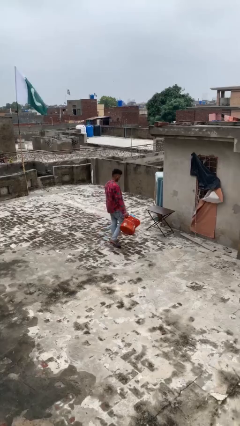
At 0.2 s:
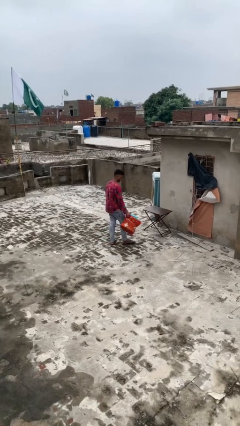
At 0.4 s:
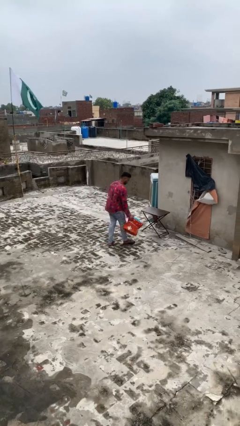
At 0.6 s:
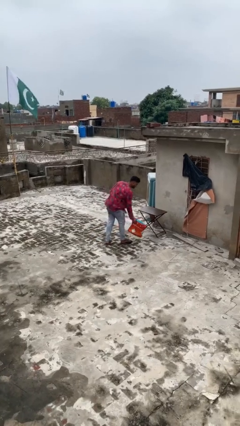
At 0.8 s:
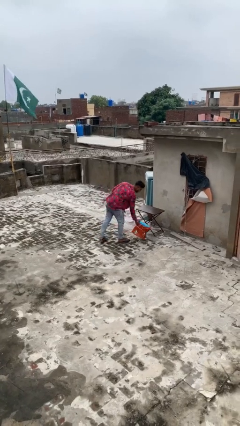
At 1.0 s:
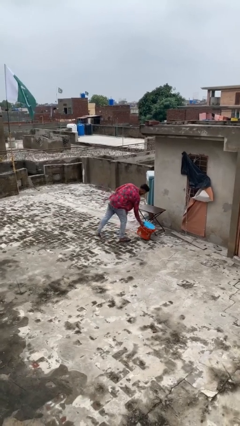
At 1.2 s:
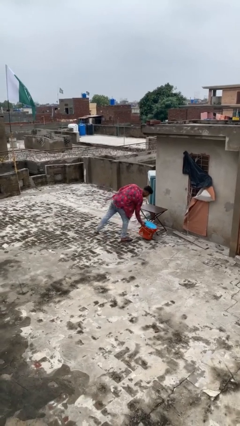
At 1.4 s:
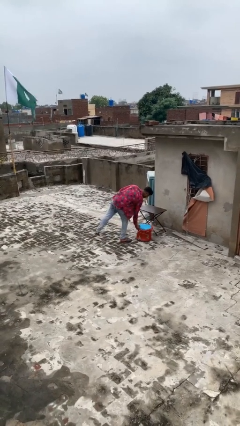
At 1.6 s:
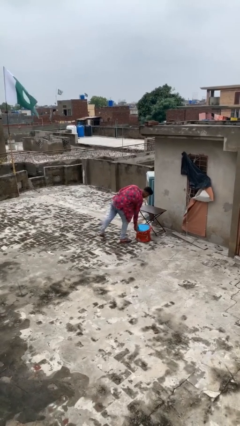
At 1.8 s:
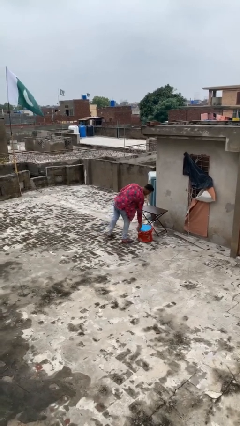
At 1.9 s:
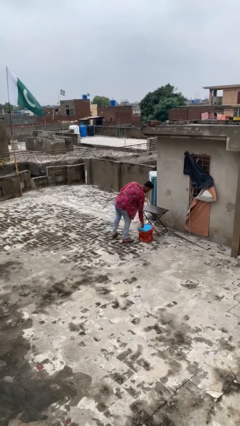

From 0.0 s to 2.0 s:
person puts down object on floor

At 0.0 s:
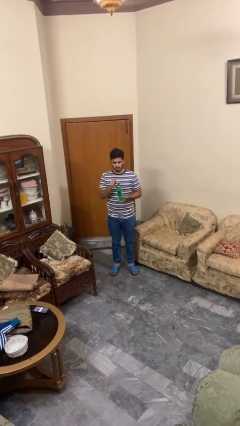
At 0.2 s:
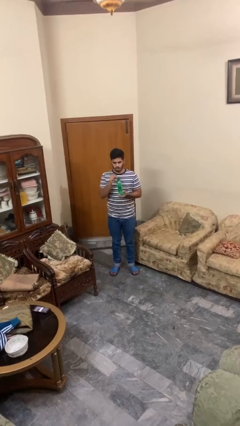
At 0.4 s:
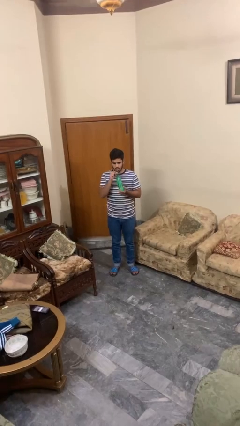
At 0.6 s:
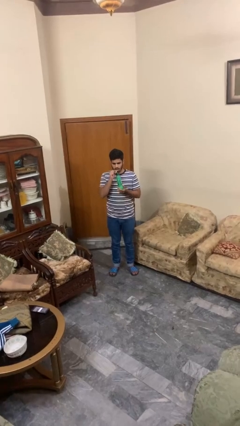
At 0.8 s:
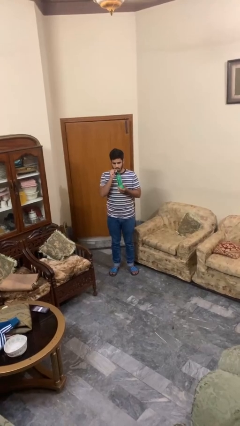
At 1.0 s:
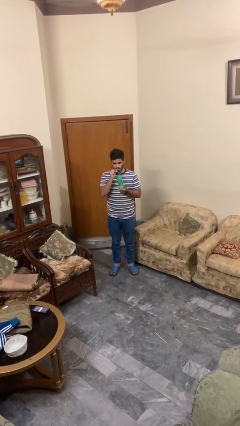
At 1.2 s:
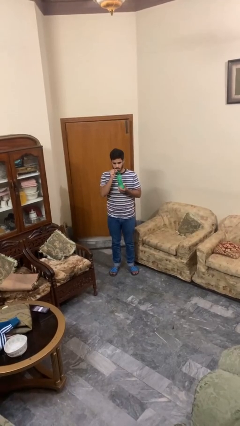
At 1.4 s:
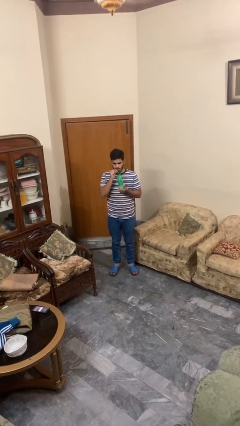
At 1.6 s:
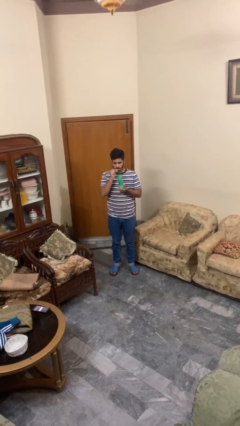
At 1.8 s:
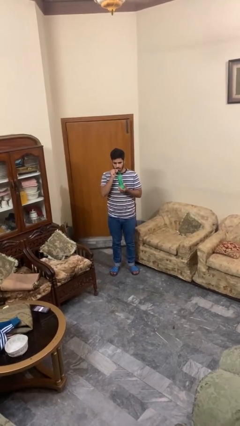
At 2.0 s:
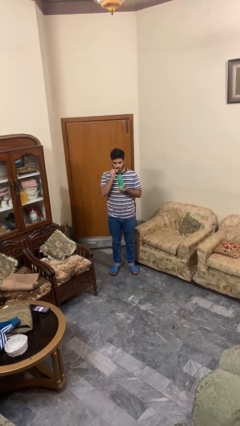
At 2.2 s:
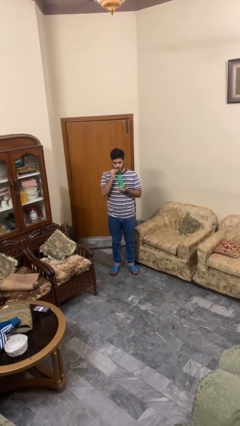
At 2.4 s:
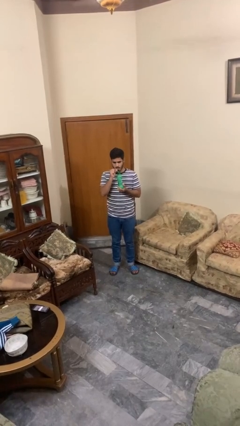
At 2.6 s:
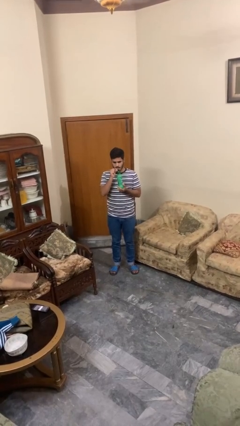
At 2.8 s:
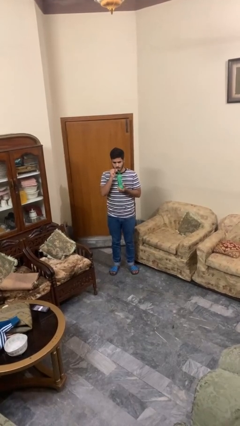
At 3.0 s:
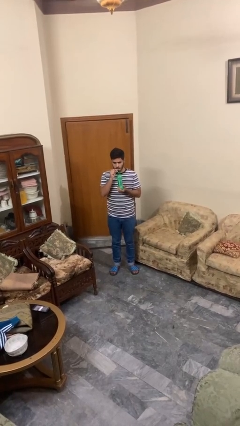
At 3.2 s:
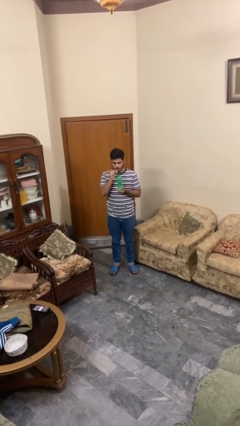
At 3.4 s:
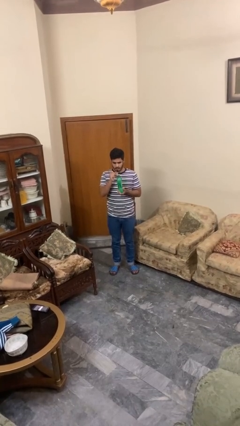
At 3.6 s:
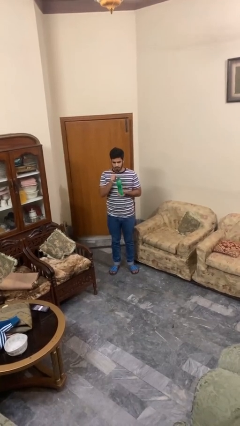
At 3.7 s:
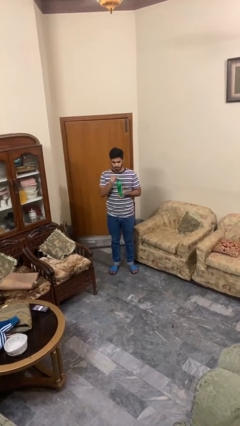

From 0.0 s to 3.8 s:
person drinks from straw

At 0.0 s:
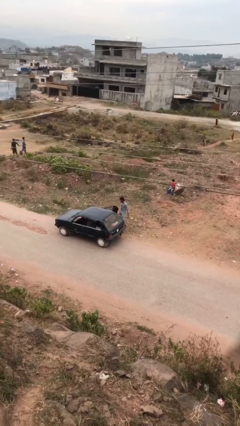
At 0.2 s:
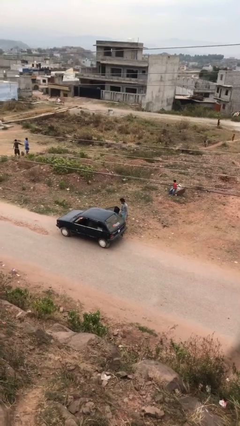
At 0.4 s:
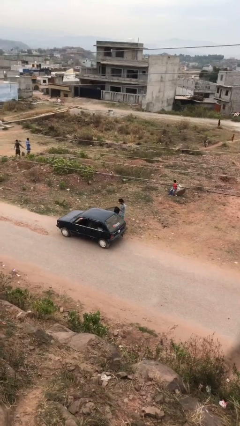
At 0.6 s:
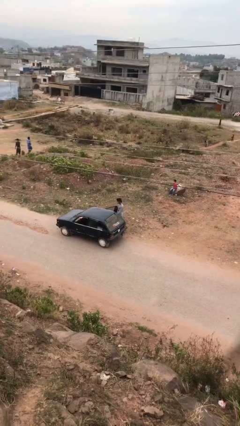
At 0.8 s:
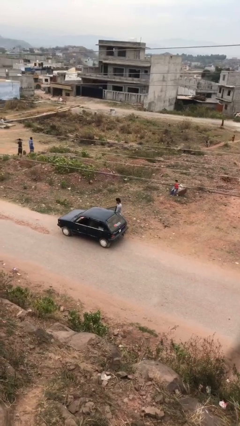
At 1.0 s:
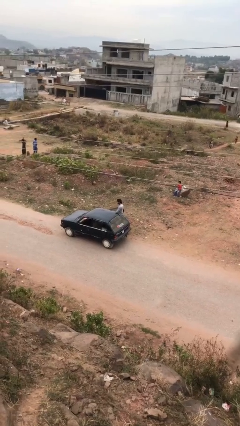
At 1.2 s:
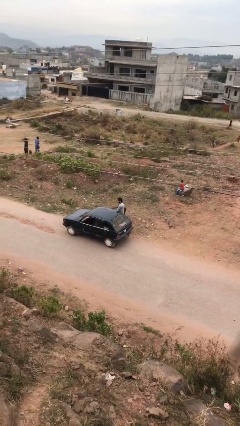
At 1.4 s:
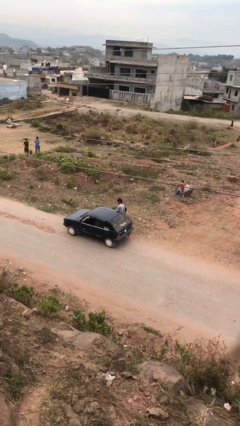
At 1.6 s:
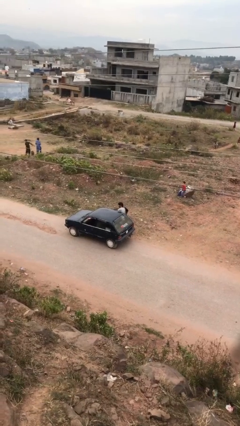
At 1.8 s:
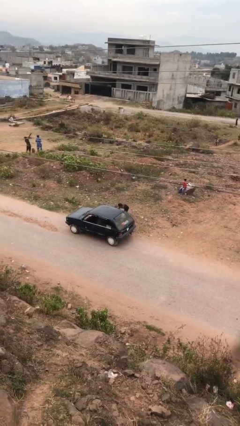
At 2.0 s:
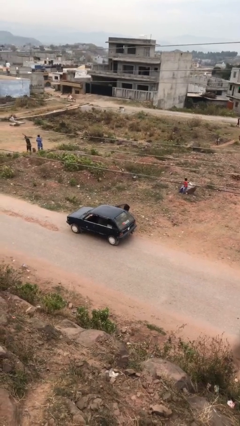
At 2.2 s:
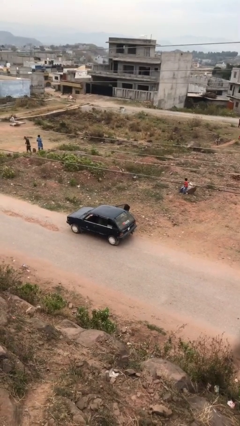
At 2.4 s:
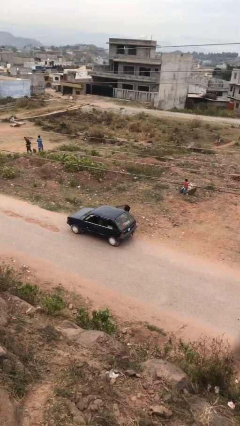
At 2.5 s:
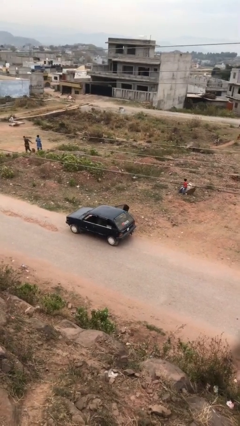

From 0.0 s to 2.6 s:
person enters car

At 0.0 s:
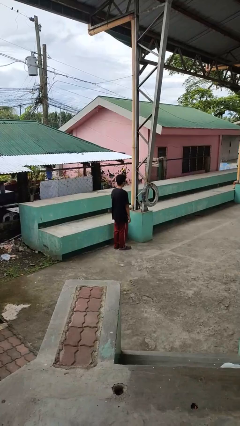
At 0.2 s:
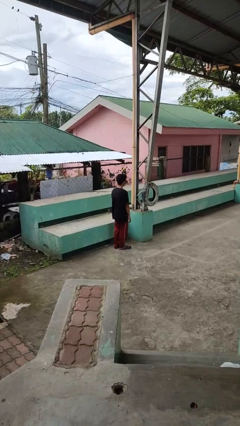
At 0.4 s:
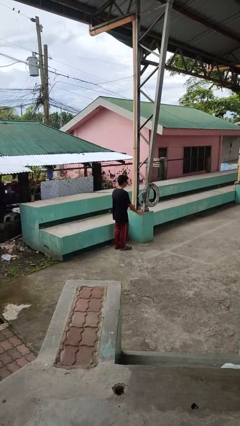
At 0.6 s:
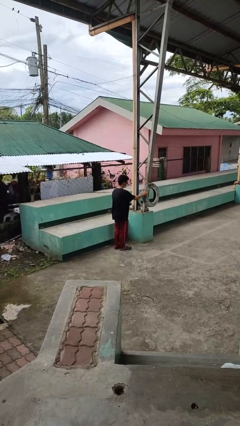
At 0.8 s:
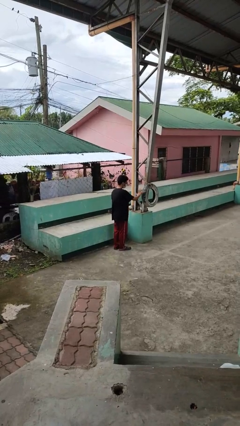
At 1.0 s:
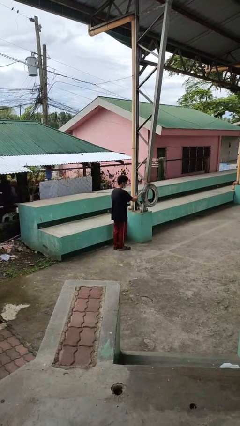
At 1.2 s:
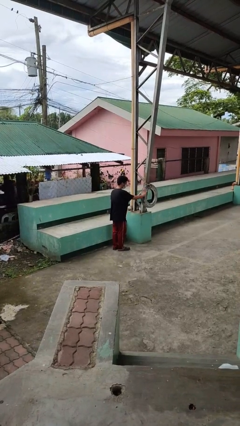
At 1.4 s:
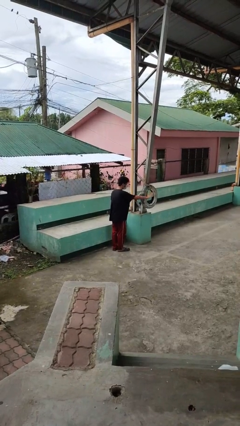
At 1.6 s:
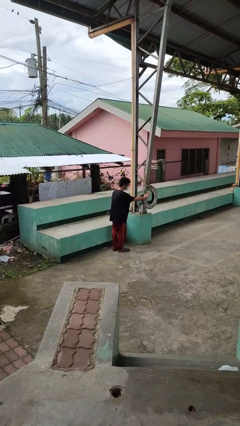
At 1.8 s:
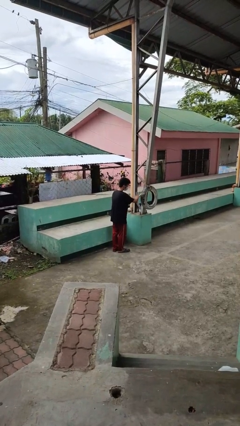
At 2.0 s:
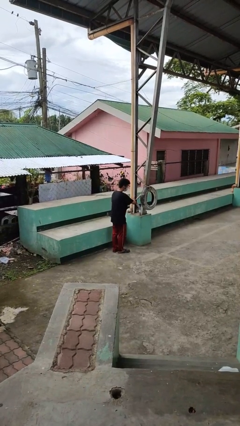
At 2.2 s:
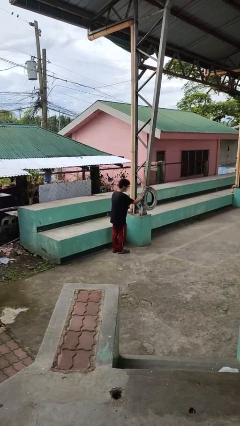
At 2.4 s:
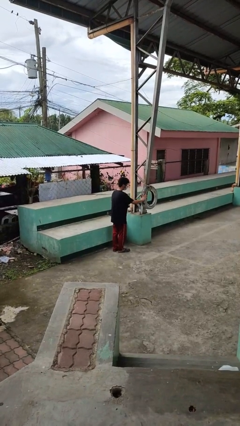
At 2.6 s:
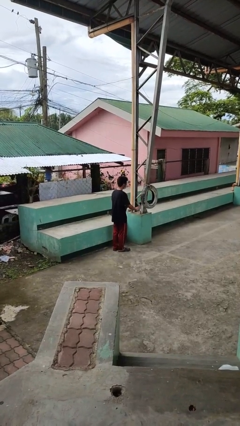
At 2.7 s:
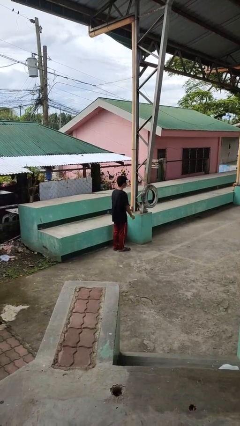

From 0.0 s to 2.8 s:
person waves hand over object

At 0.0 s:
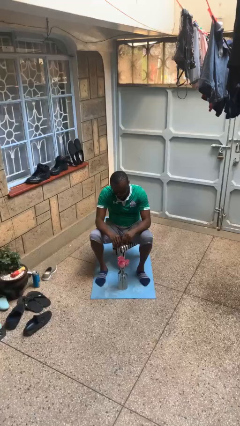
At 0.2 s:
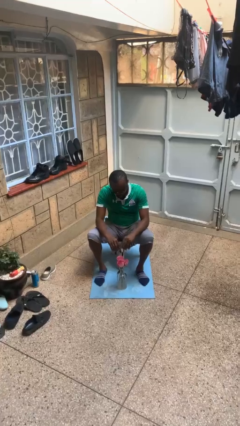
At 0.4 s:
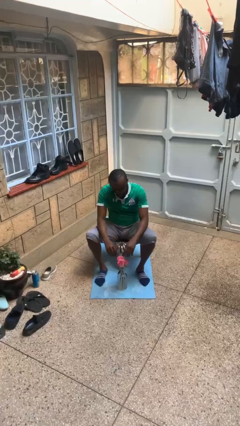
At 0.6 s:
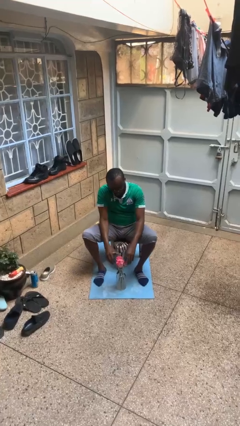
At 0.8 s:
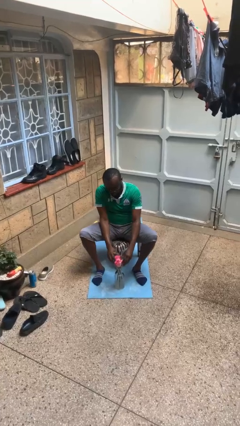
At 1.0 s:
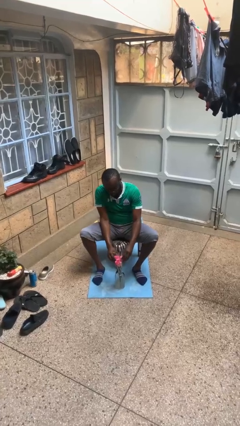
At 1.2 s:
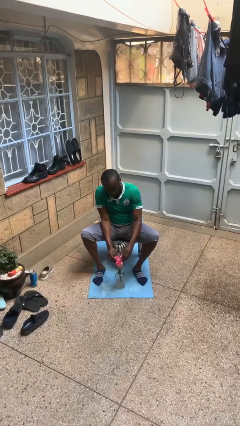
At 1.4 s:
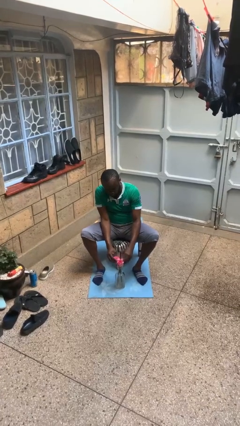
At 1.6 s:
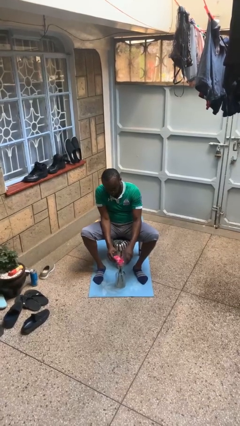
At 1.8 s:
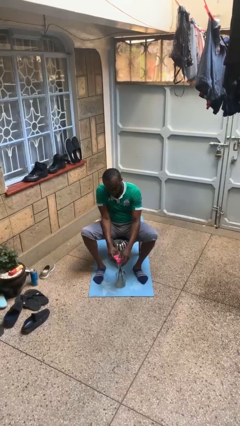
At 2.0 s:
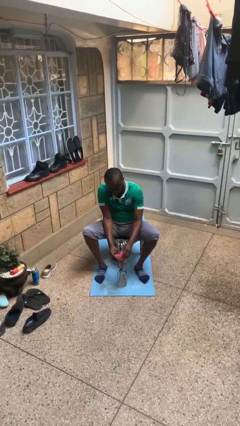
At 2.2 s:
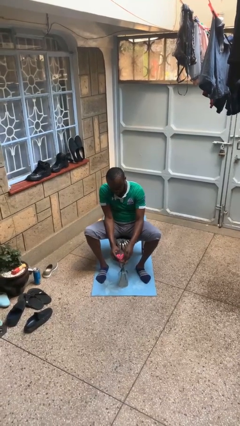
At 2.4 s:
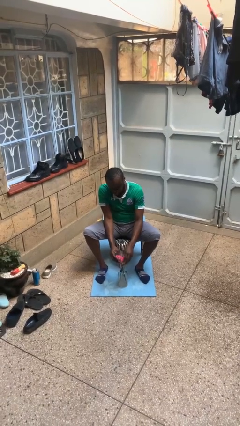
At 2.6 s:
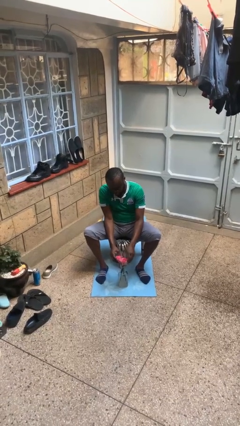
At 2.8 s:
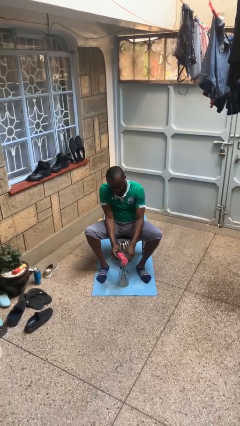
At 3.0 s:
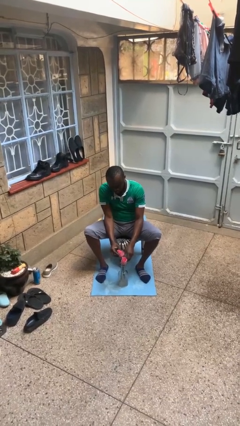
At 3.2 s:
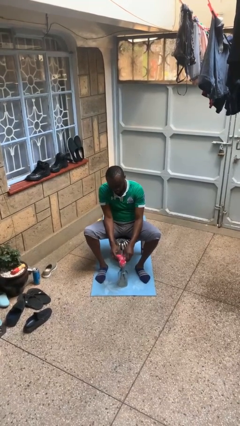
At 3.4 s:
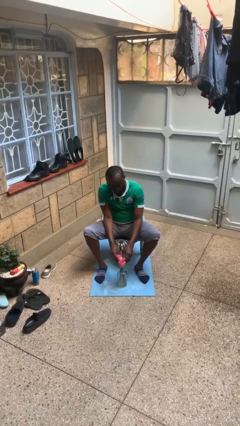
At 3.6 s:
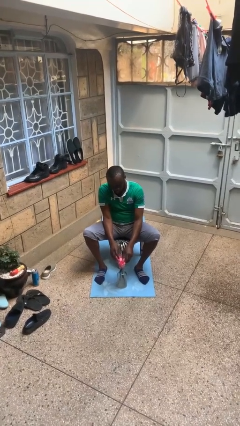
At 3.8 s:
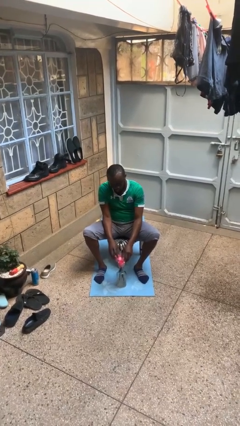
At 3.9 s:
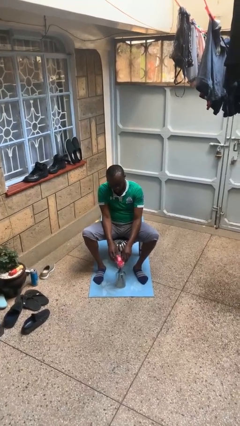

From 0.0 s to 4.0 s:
person arranges flowers in vase

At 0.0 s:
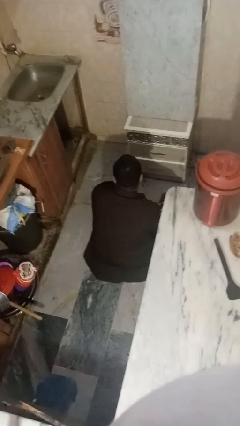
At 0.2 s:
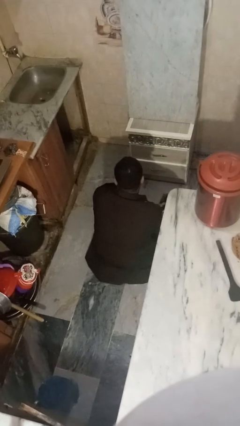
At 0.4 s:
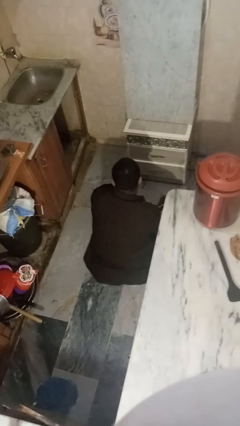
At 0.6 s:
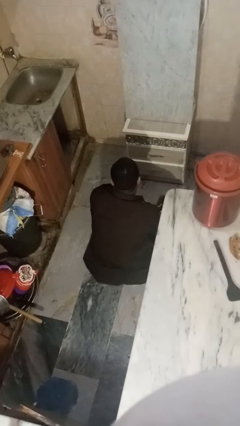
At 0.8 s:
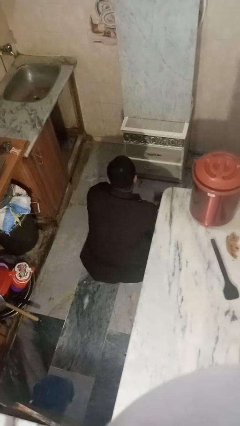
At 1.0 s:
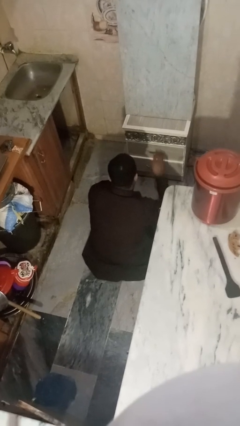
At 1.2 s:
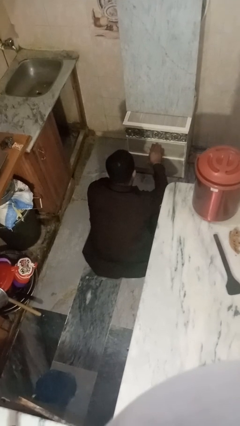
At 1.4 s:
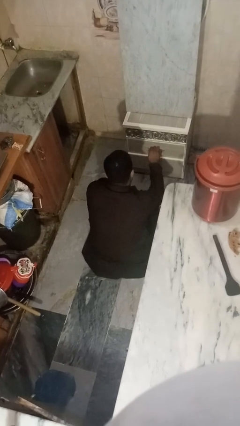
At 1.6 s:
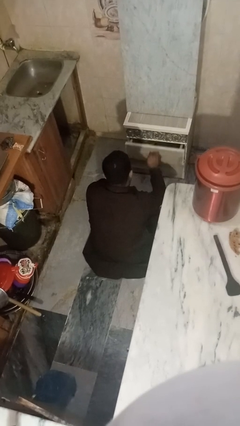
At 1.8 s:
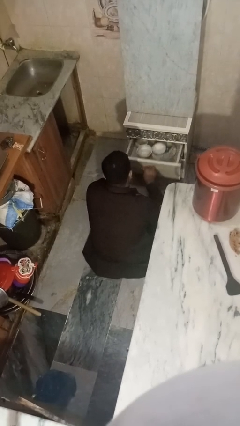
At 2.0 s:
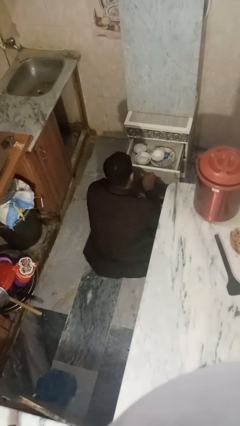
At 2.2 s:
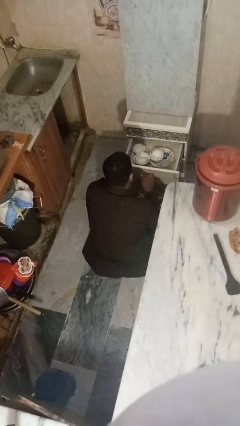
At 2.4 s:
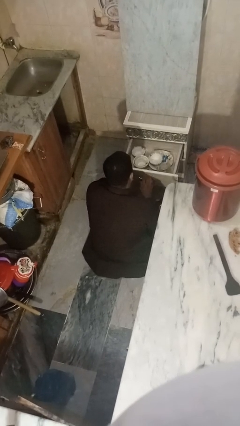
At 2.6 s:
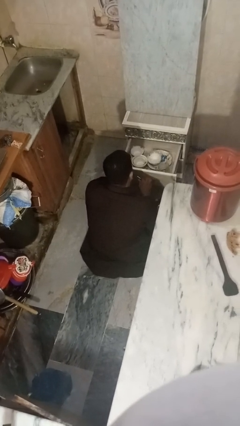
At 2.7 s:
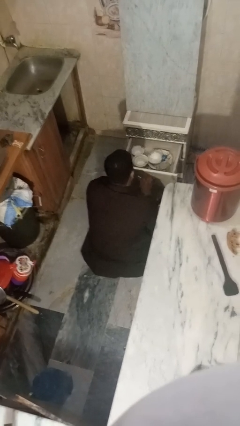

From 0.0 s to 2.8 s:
person opens kitchen drawer
